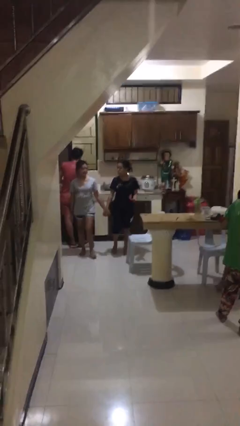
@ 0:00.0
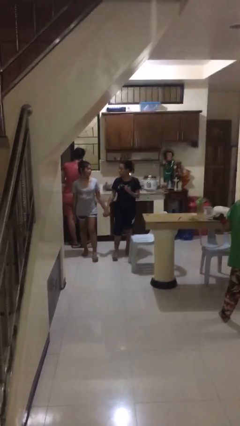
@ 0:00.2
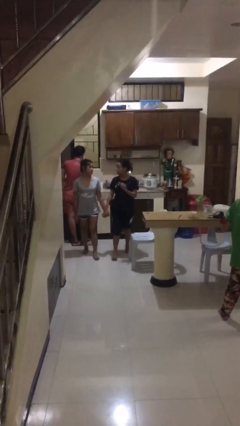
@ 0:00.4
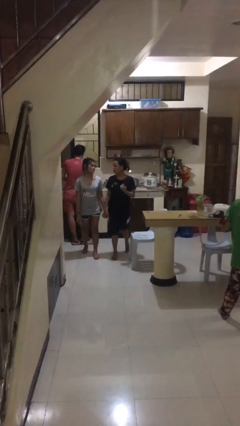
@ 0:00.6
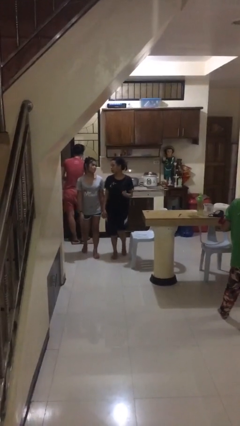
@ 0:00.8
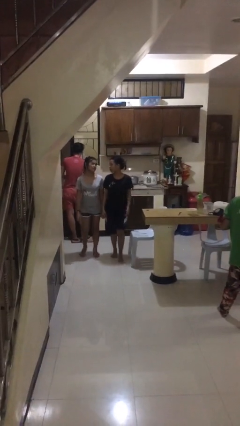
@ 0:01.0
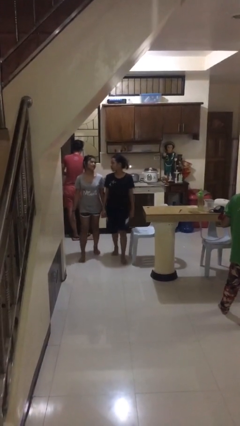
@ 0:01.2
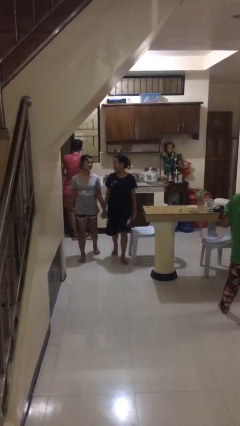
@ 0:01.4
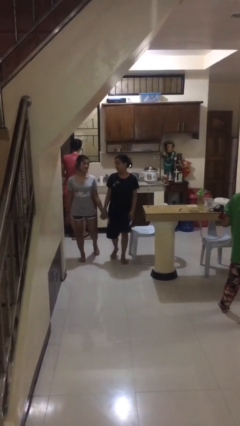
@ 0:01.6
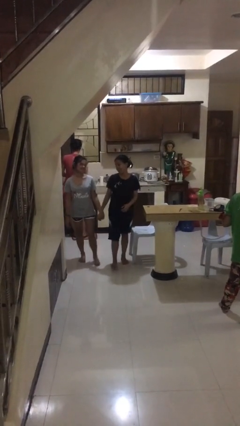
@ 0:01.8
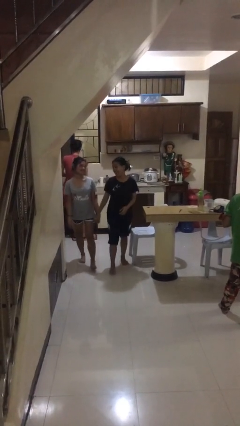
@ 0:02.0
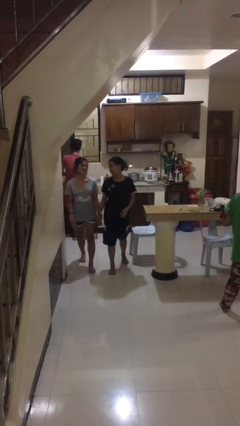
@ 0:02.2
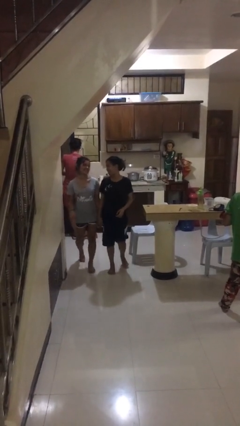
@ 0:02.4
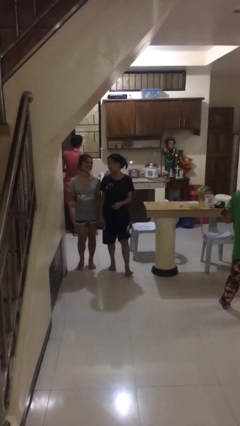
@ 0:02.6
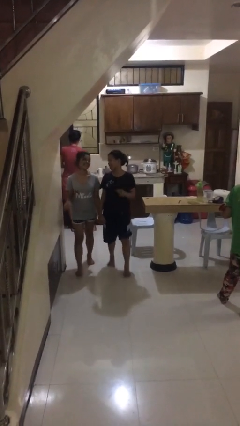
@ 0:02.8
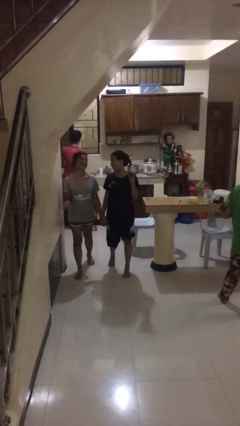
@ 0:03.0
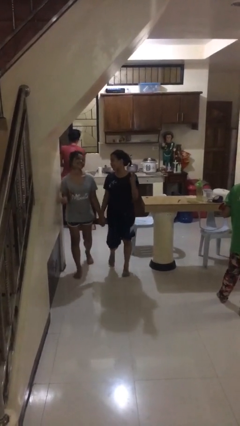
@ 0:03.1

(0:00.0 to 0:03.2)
person holds hand

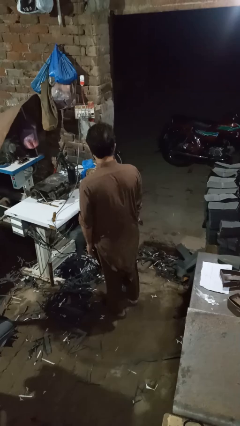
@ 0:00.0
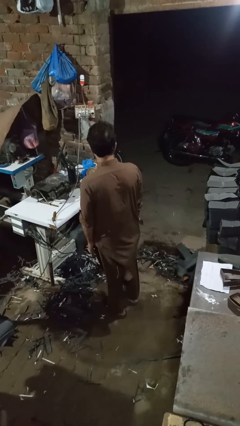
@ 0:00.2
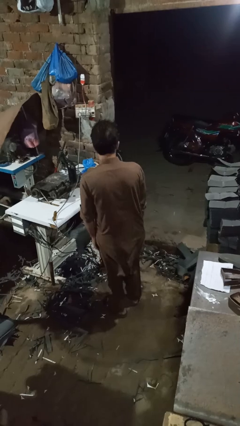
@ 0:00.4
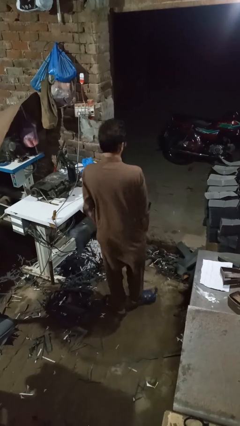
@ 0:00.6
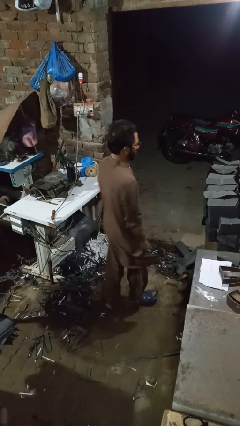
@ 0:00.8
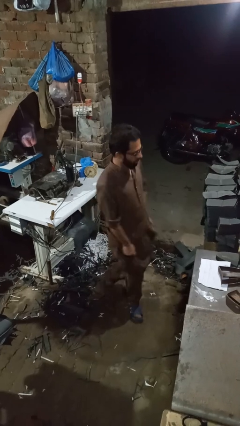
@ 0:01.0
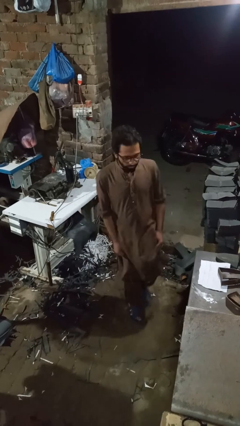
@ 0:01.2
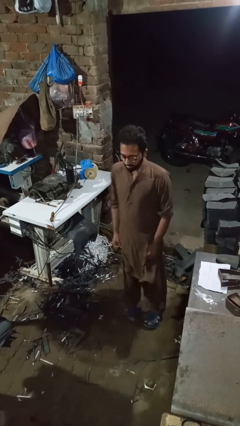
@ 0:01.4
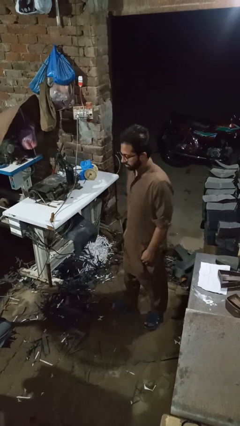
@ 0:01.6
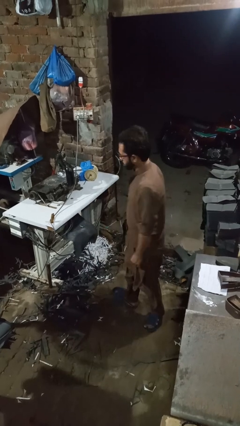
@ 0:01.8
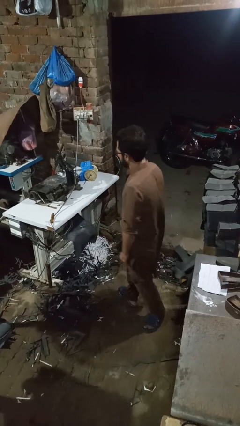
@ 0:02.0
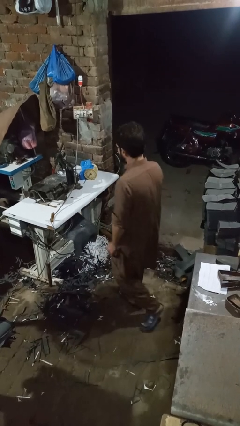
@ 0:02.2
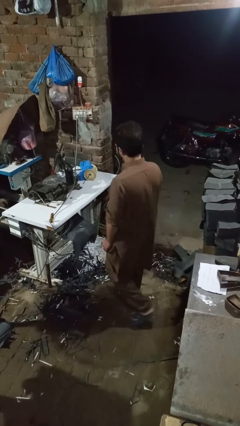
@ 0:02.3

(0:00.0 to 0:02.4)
person twirls

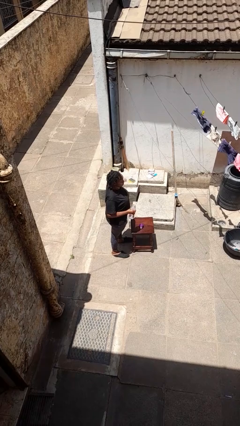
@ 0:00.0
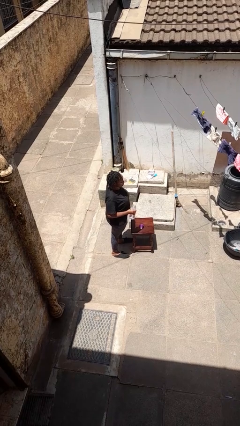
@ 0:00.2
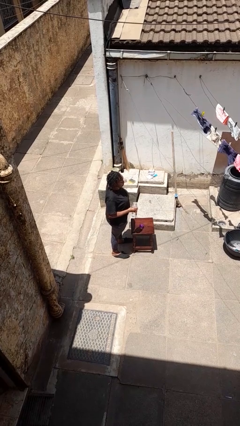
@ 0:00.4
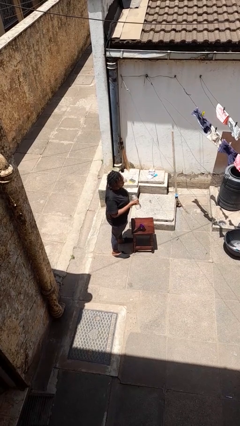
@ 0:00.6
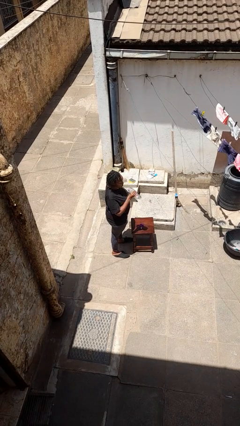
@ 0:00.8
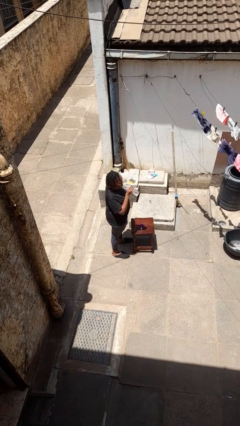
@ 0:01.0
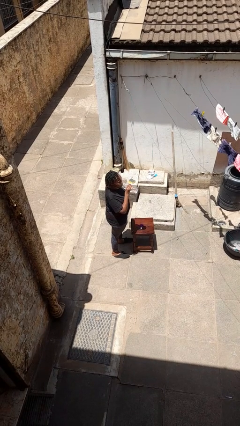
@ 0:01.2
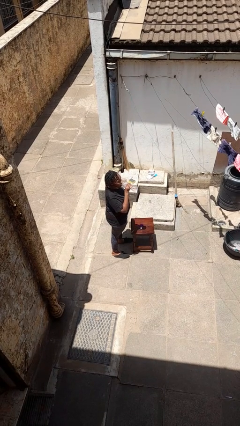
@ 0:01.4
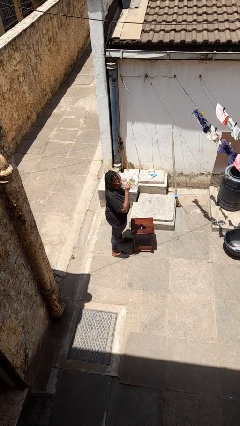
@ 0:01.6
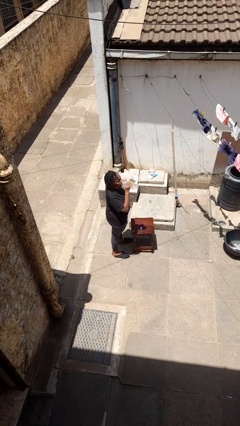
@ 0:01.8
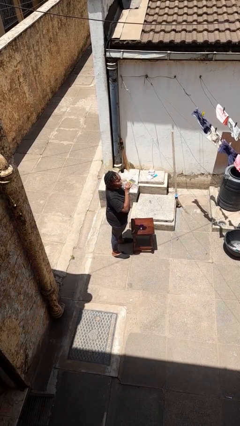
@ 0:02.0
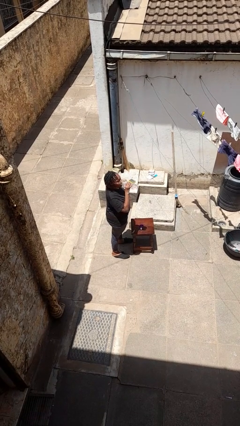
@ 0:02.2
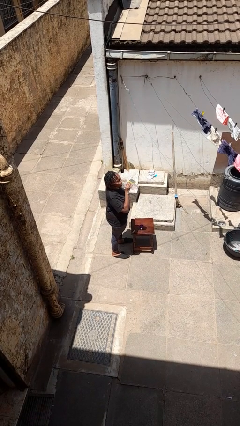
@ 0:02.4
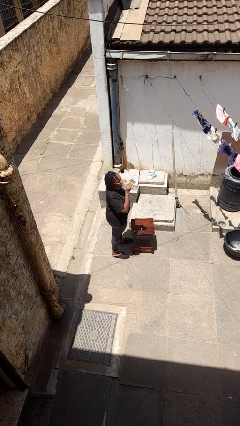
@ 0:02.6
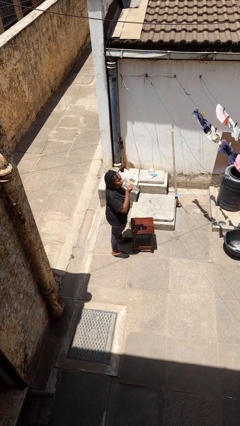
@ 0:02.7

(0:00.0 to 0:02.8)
person drinks from bottle

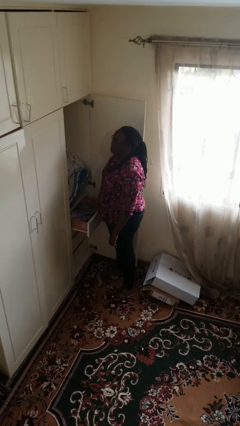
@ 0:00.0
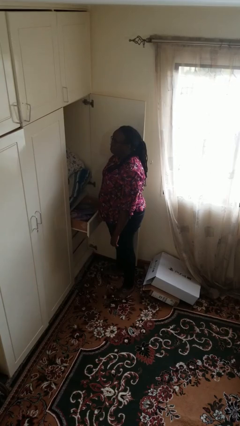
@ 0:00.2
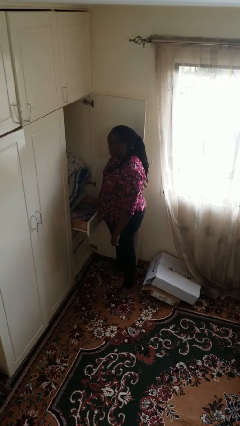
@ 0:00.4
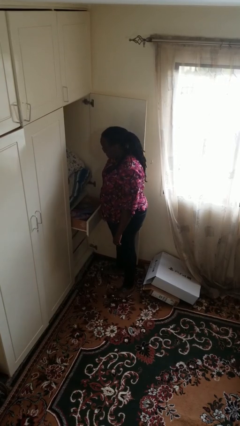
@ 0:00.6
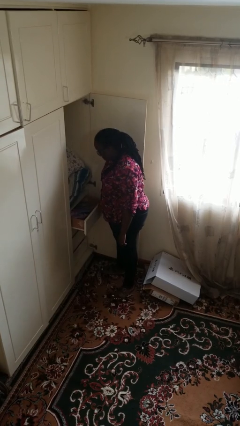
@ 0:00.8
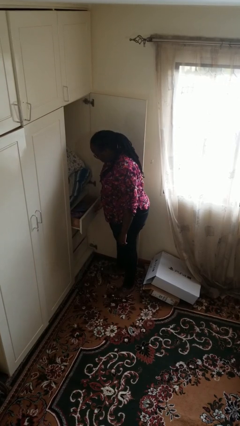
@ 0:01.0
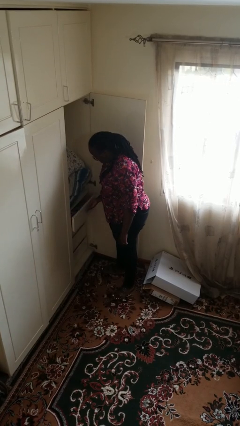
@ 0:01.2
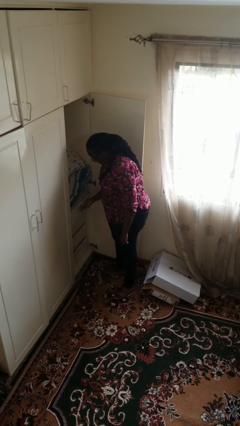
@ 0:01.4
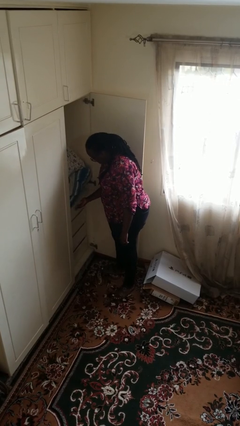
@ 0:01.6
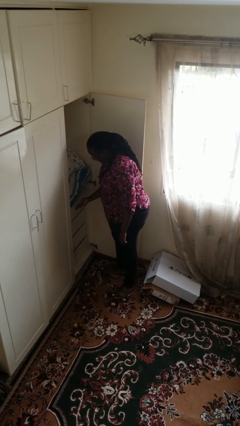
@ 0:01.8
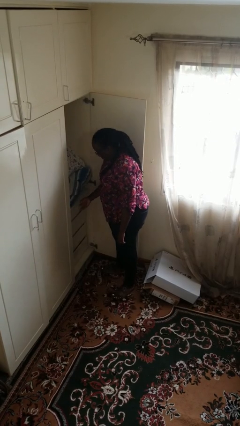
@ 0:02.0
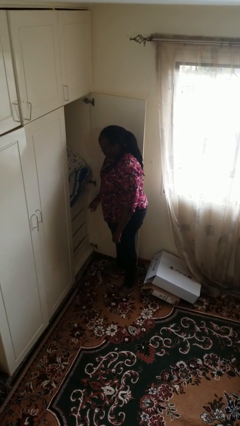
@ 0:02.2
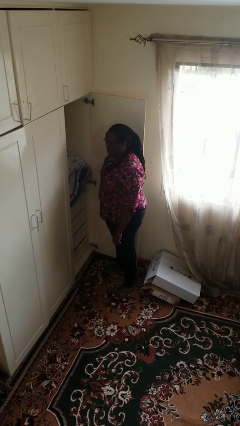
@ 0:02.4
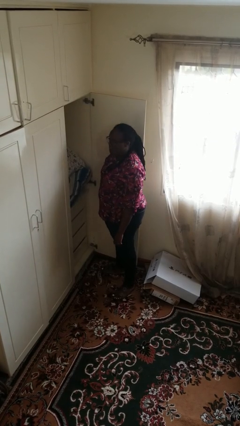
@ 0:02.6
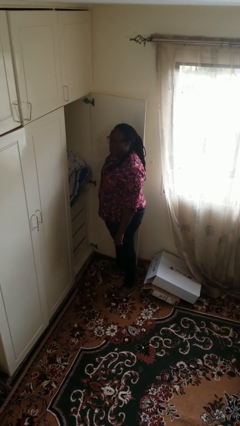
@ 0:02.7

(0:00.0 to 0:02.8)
person closes dresser drawer

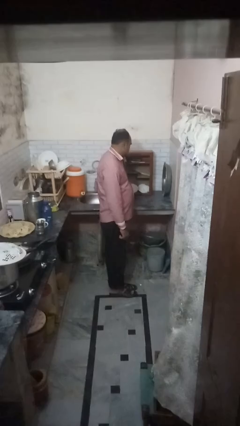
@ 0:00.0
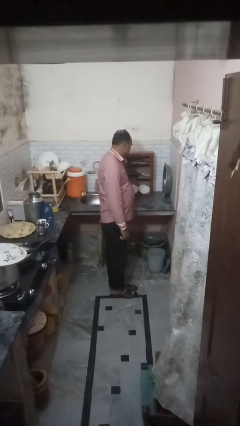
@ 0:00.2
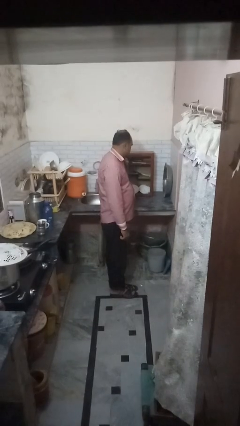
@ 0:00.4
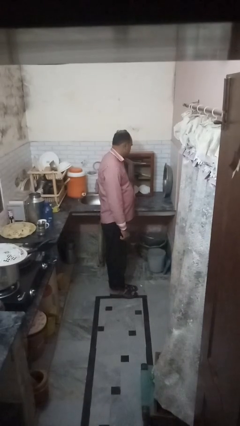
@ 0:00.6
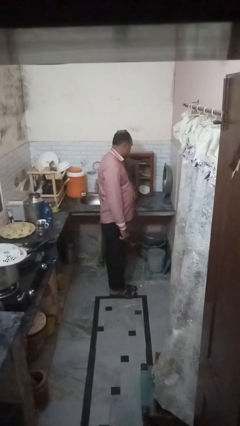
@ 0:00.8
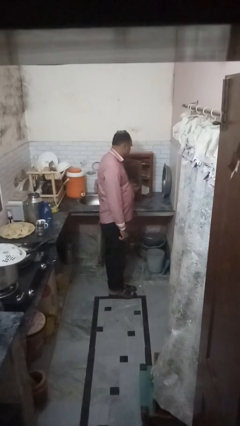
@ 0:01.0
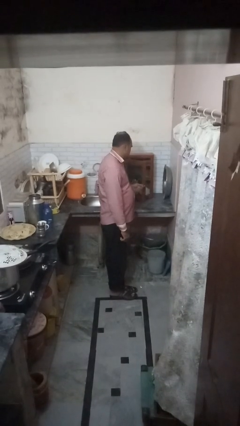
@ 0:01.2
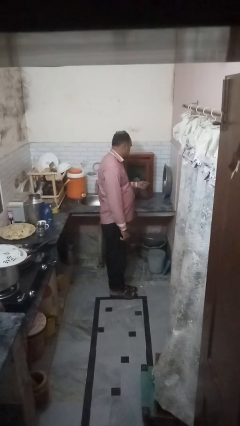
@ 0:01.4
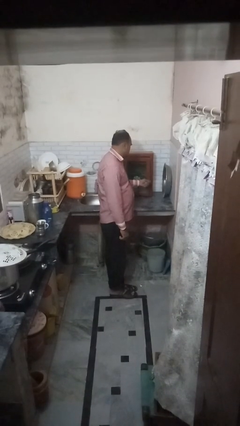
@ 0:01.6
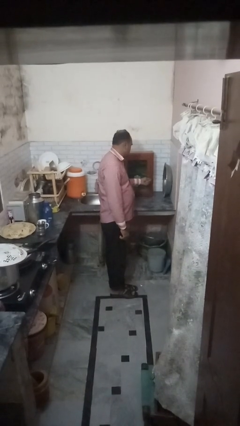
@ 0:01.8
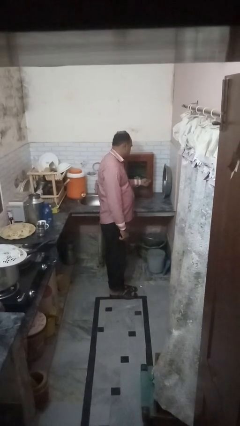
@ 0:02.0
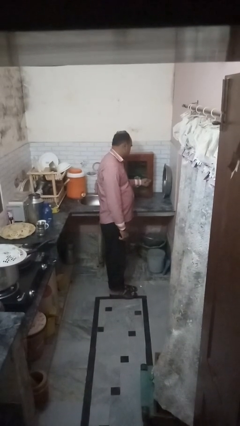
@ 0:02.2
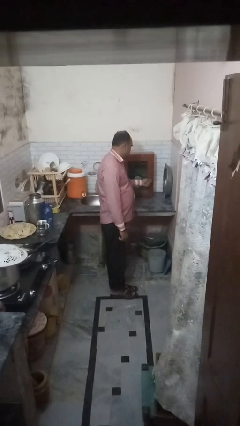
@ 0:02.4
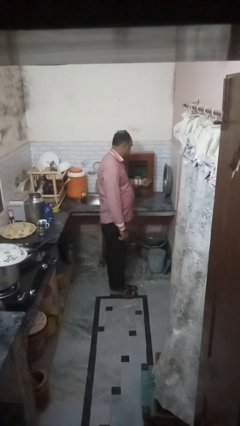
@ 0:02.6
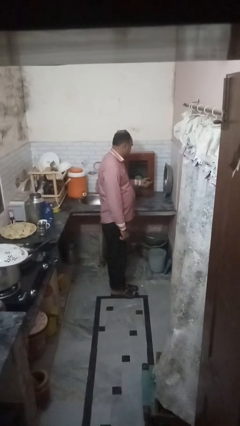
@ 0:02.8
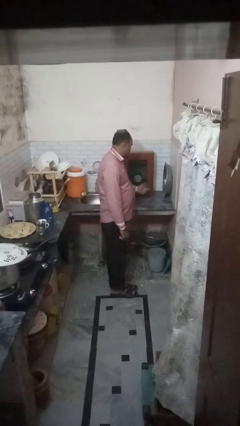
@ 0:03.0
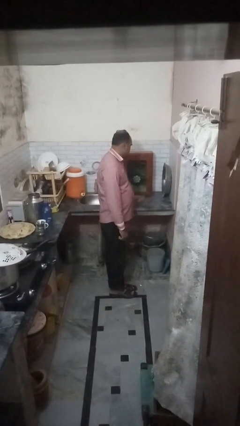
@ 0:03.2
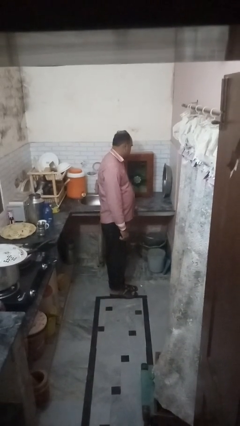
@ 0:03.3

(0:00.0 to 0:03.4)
person closes cabinet

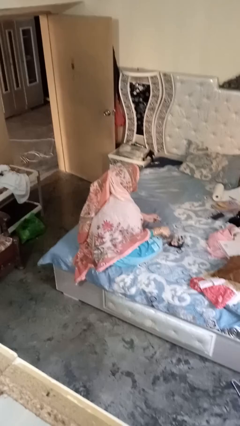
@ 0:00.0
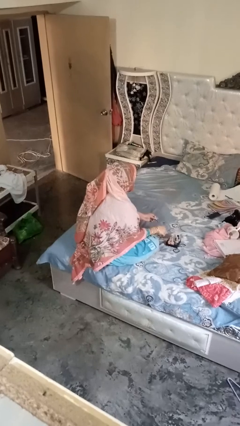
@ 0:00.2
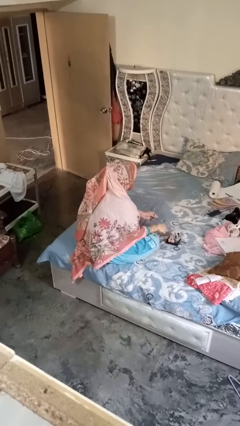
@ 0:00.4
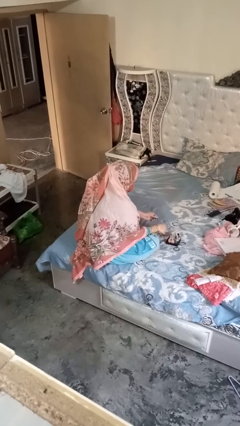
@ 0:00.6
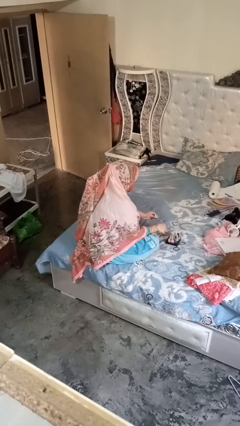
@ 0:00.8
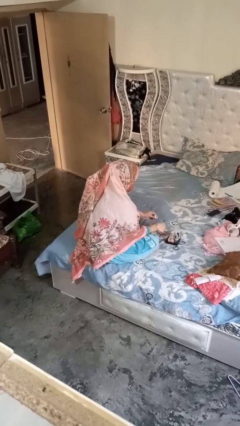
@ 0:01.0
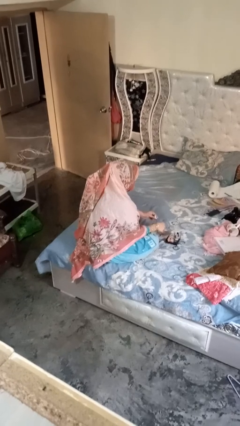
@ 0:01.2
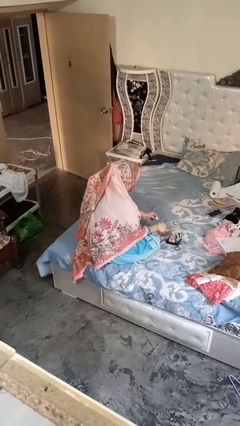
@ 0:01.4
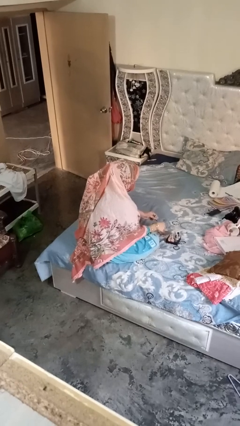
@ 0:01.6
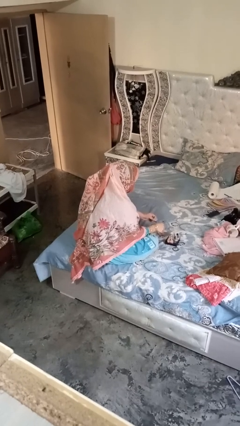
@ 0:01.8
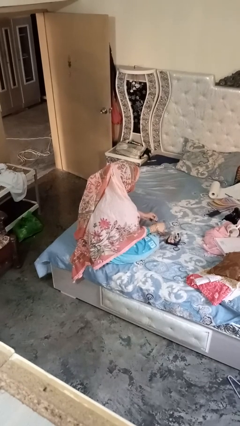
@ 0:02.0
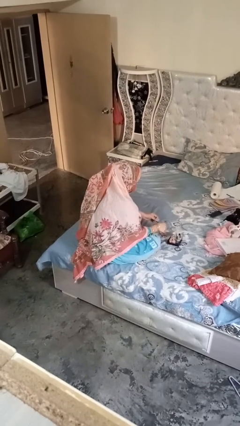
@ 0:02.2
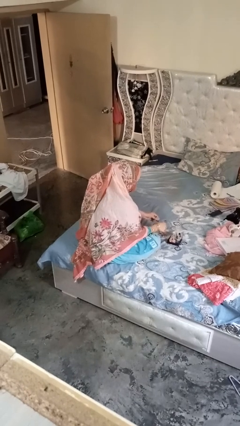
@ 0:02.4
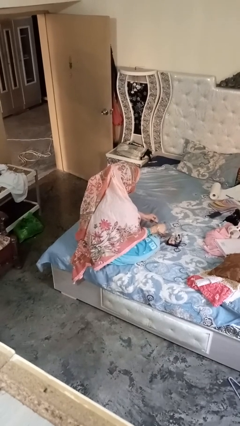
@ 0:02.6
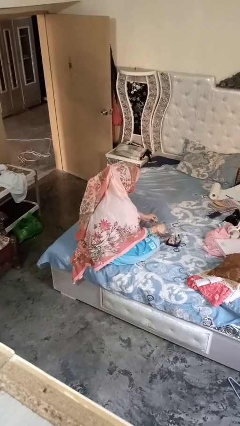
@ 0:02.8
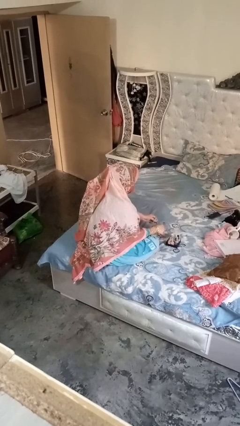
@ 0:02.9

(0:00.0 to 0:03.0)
person paints fingernails
